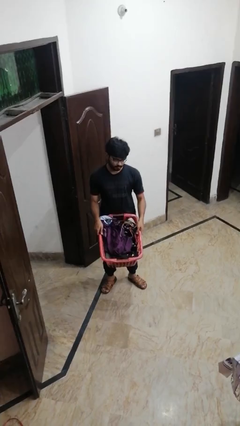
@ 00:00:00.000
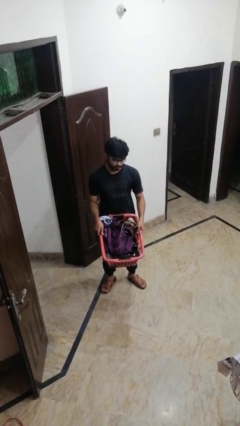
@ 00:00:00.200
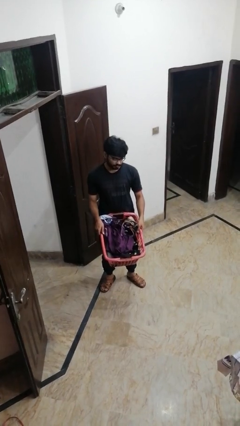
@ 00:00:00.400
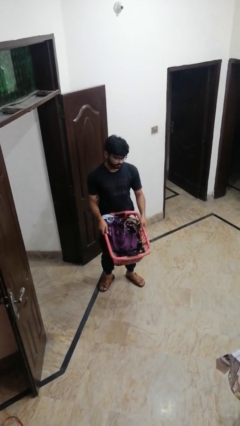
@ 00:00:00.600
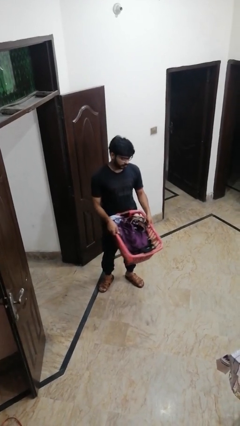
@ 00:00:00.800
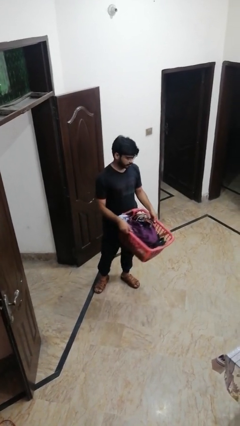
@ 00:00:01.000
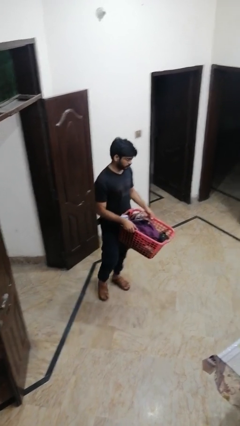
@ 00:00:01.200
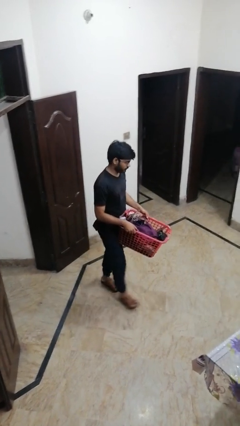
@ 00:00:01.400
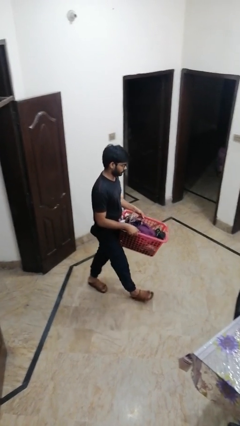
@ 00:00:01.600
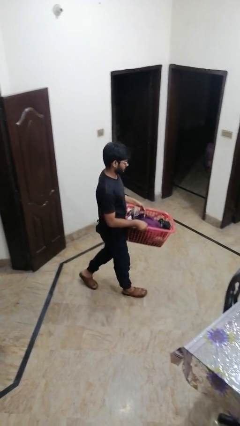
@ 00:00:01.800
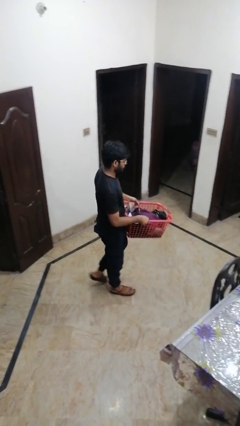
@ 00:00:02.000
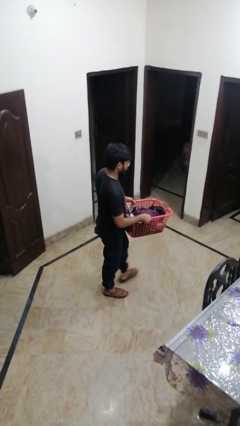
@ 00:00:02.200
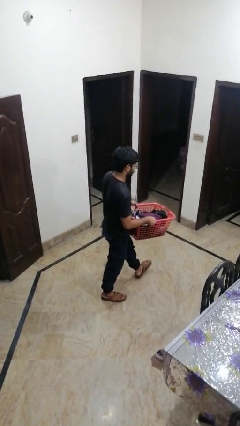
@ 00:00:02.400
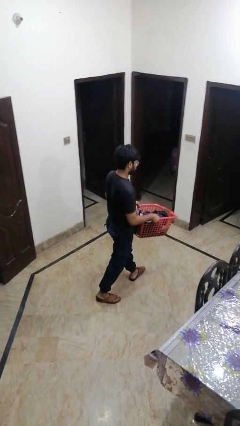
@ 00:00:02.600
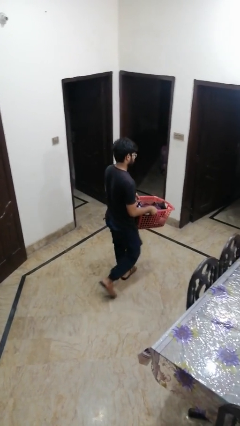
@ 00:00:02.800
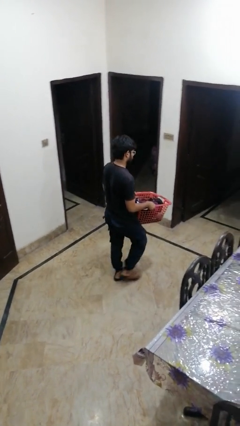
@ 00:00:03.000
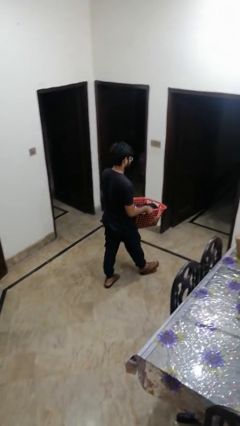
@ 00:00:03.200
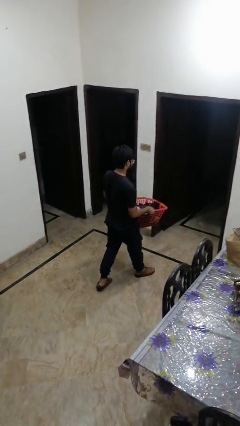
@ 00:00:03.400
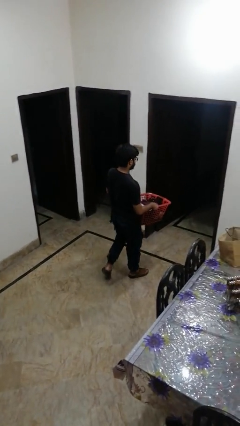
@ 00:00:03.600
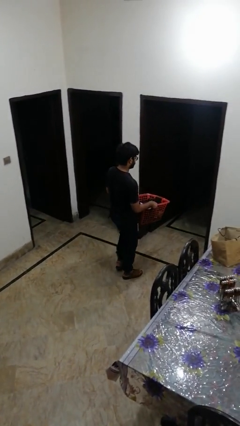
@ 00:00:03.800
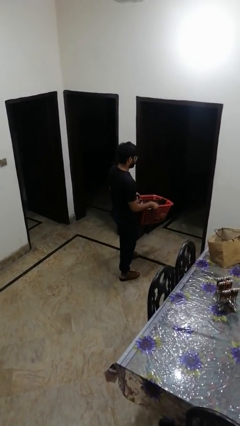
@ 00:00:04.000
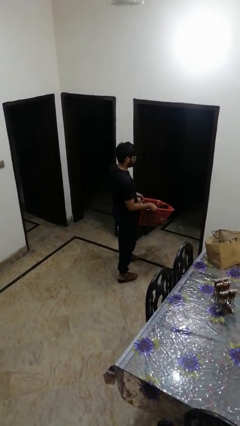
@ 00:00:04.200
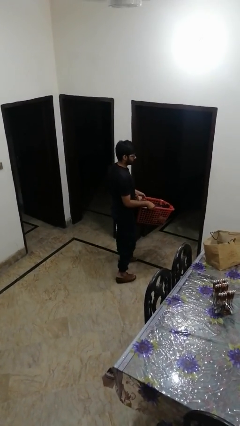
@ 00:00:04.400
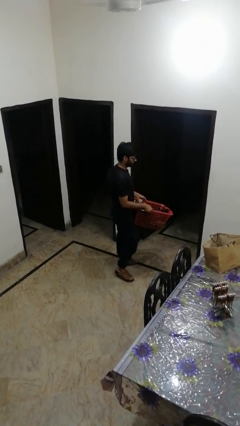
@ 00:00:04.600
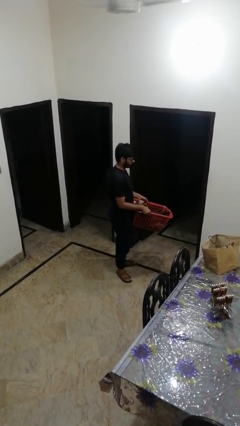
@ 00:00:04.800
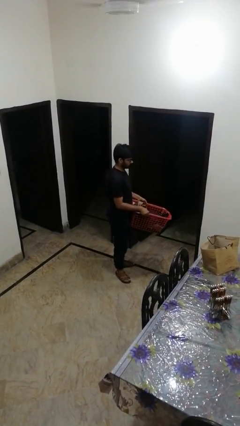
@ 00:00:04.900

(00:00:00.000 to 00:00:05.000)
person carries laundry basket
